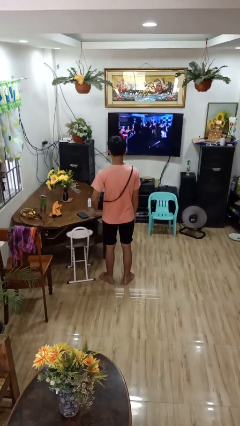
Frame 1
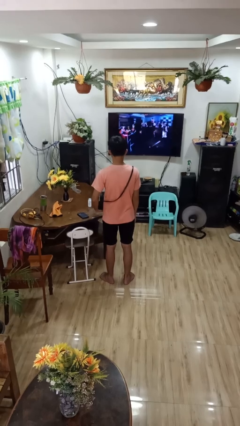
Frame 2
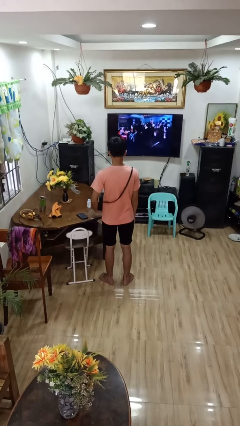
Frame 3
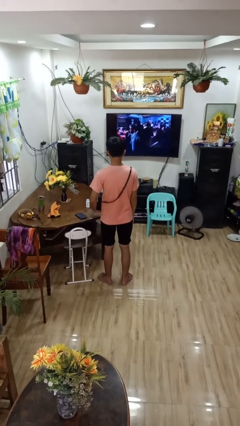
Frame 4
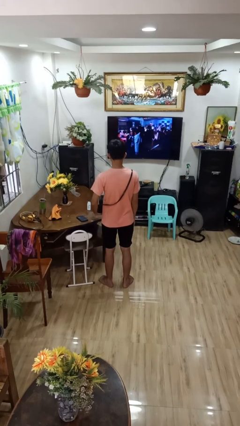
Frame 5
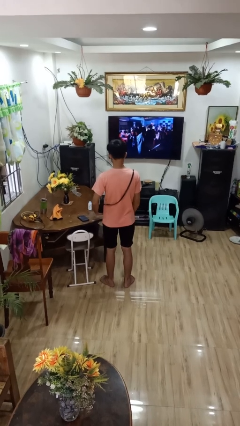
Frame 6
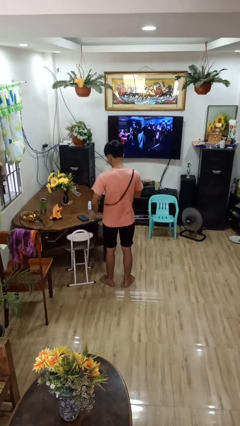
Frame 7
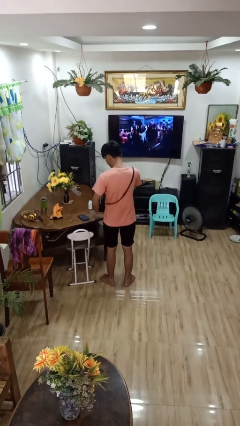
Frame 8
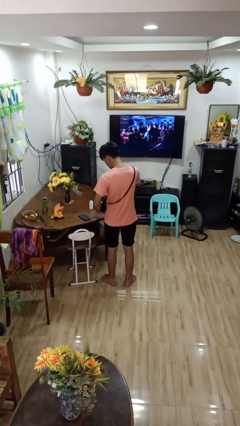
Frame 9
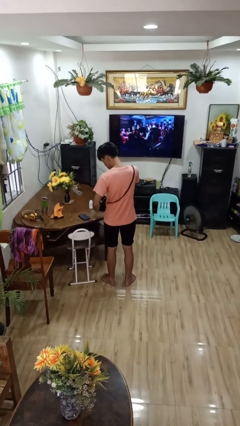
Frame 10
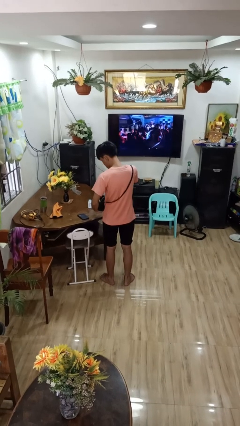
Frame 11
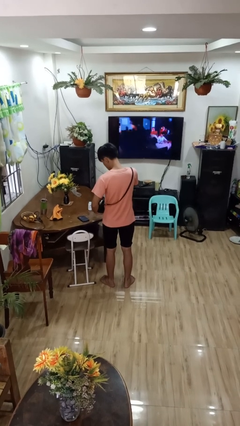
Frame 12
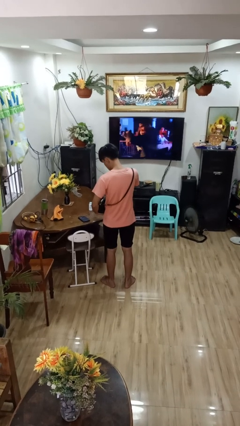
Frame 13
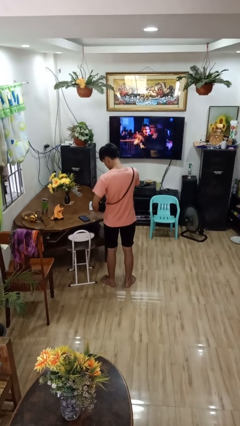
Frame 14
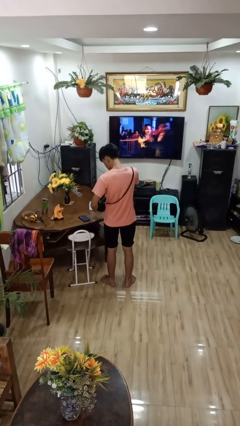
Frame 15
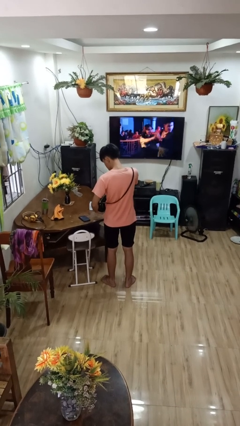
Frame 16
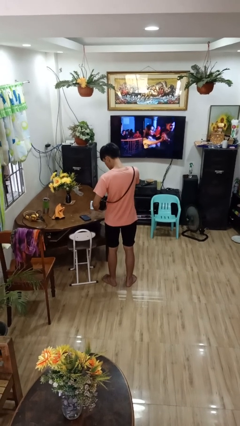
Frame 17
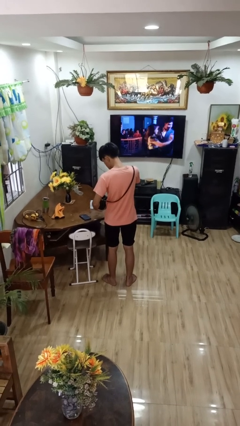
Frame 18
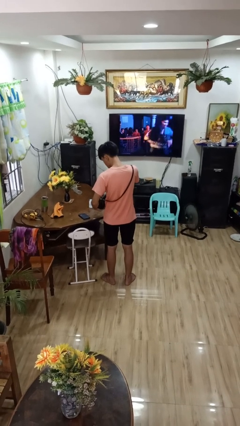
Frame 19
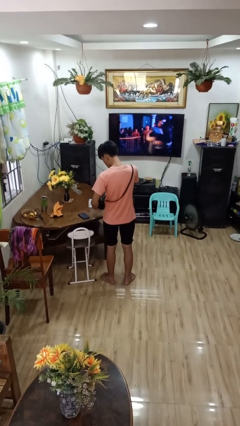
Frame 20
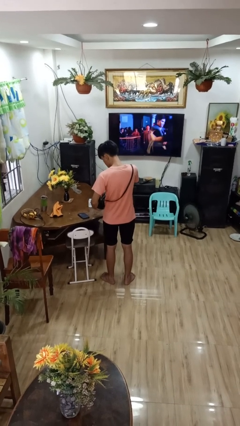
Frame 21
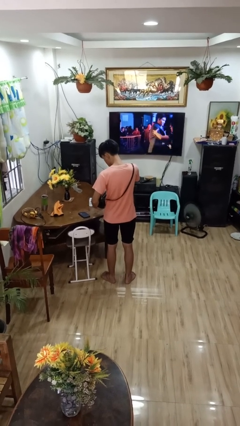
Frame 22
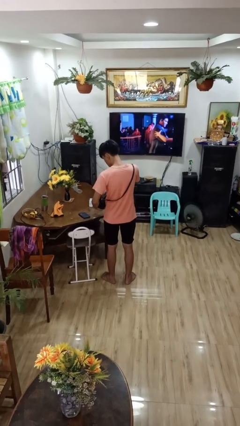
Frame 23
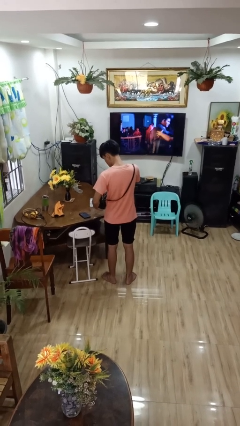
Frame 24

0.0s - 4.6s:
person searches in purse

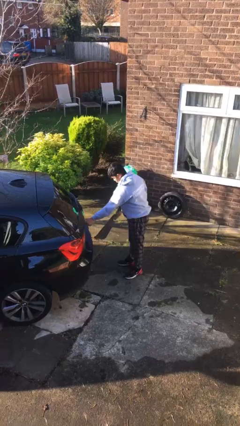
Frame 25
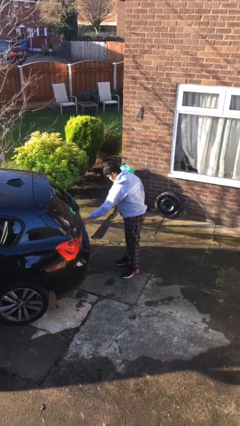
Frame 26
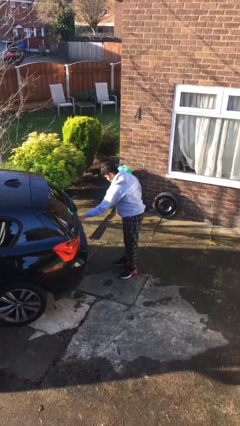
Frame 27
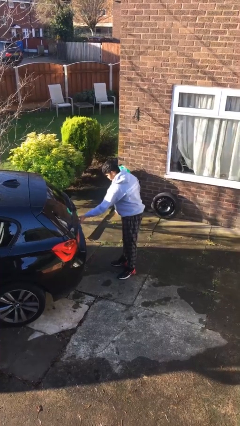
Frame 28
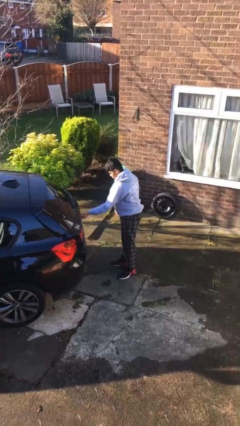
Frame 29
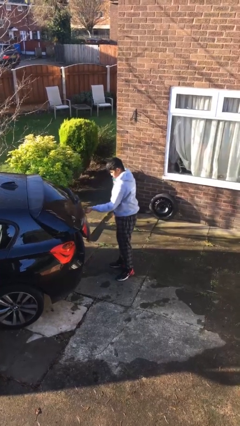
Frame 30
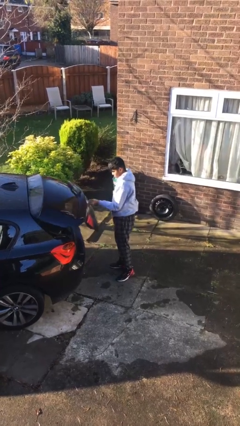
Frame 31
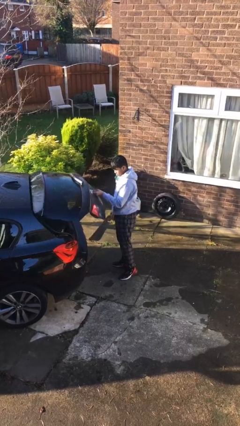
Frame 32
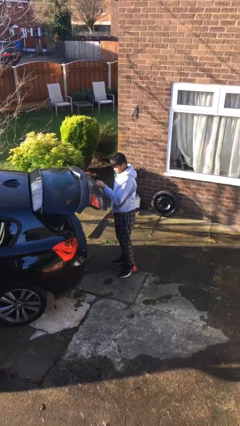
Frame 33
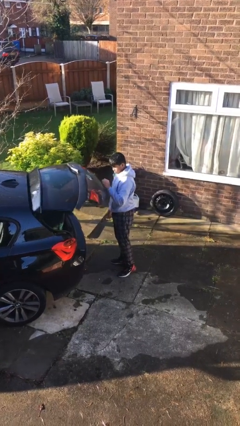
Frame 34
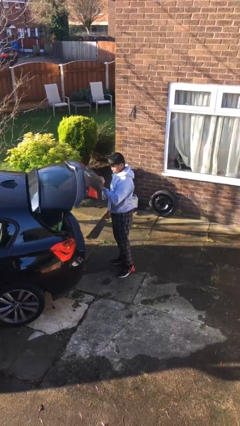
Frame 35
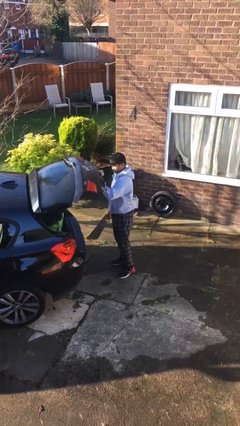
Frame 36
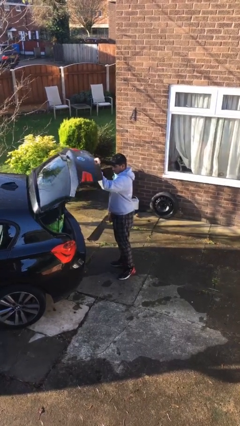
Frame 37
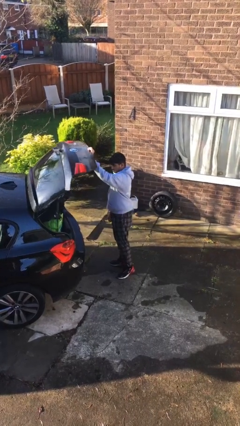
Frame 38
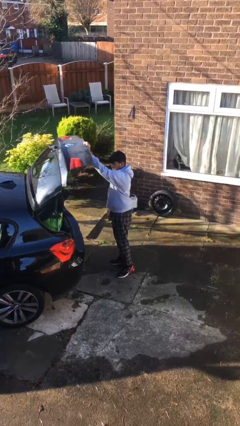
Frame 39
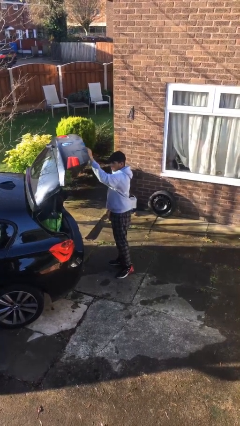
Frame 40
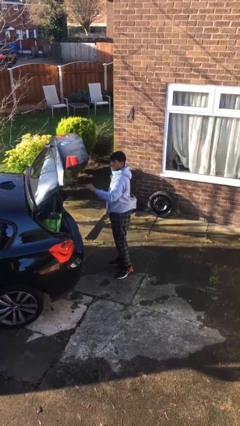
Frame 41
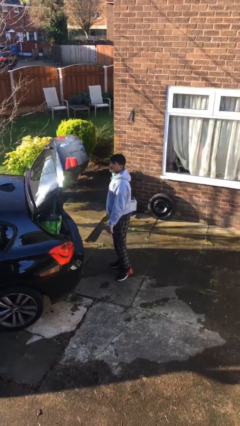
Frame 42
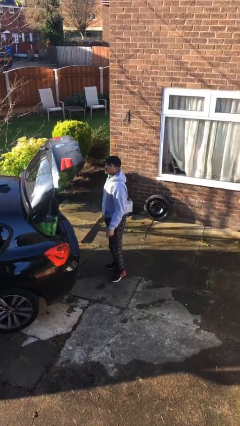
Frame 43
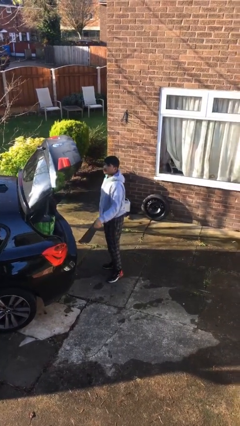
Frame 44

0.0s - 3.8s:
person opens car trunk

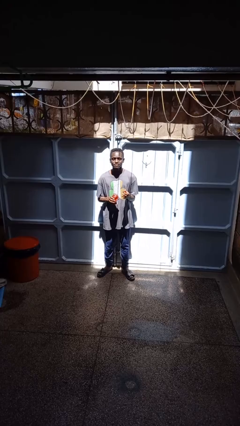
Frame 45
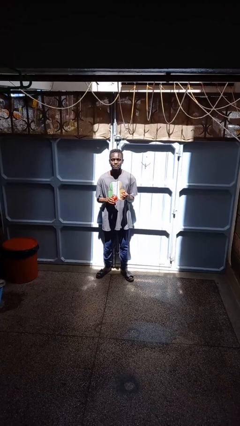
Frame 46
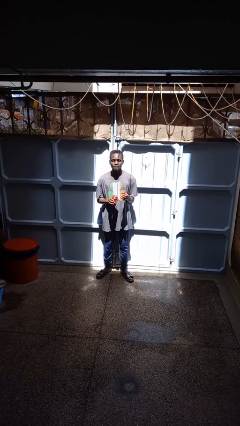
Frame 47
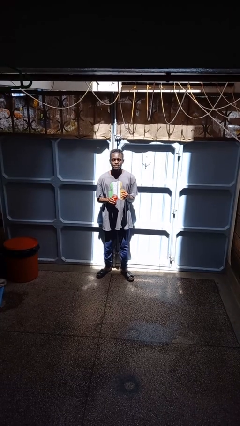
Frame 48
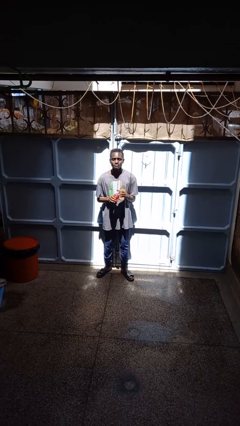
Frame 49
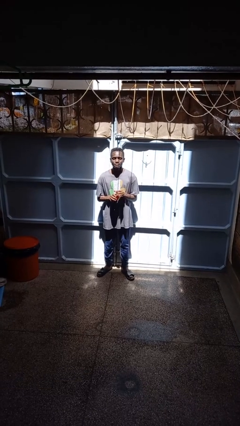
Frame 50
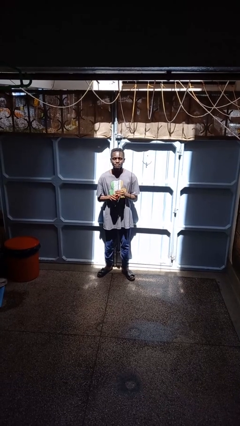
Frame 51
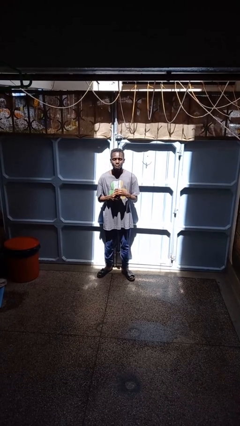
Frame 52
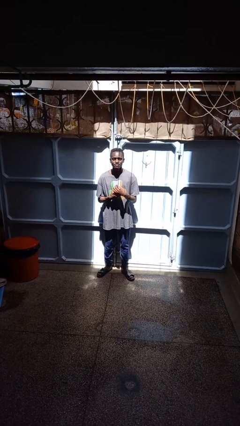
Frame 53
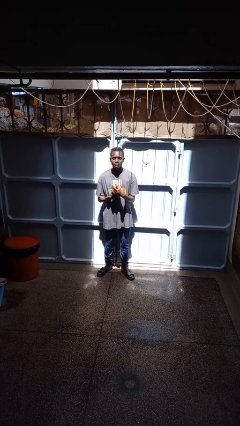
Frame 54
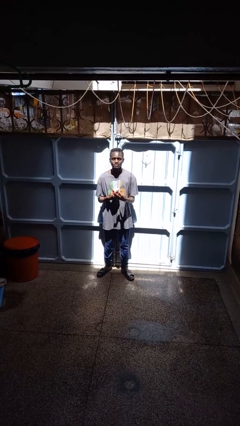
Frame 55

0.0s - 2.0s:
person closes jar

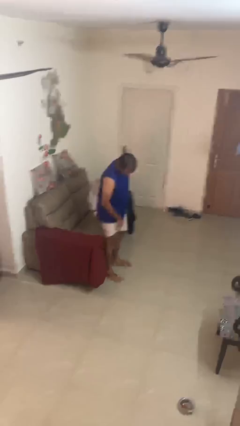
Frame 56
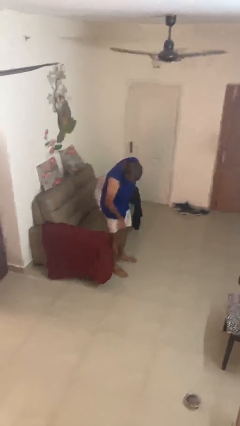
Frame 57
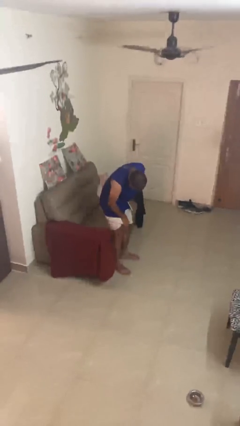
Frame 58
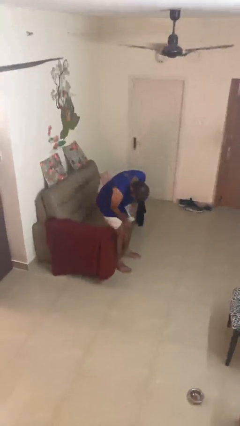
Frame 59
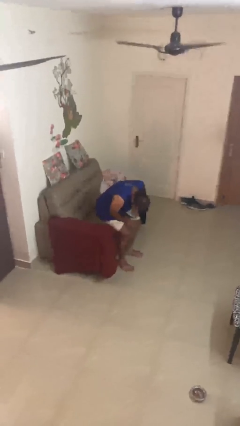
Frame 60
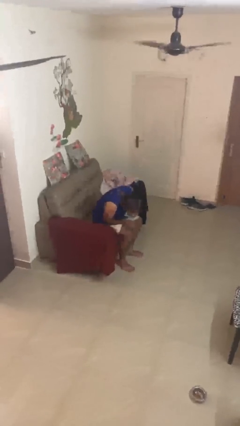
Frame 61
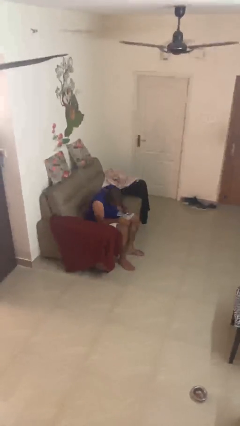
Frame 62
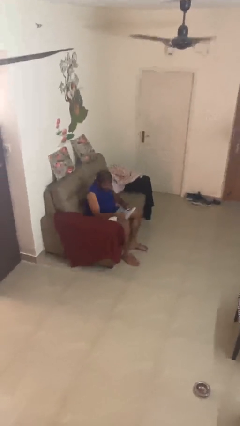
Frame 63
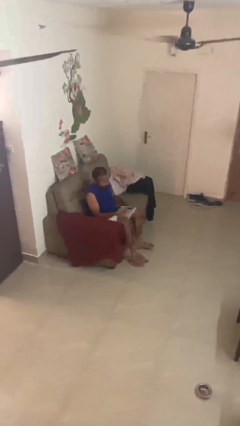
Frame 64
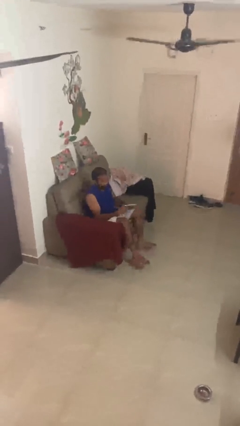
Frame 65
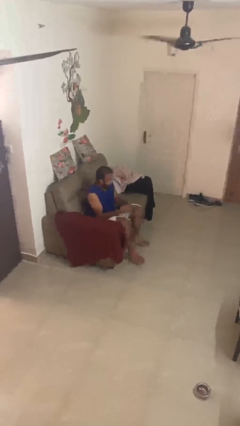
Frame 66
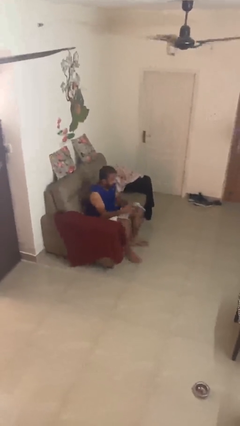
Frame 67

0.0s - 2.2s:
person sits down

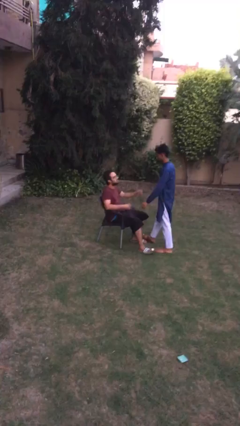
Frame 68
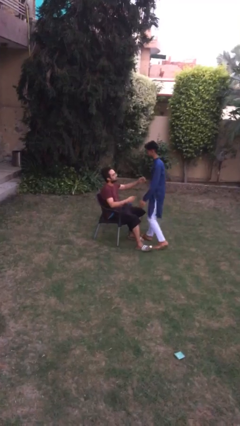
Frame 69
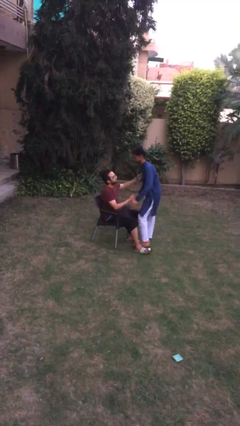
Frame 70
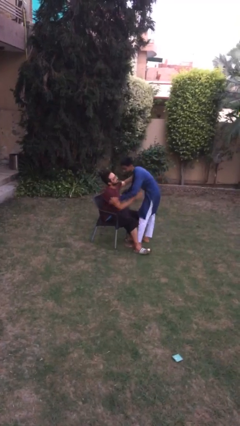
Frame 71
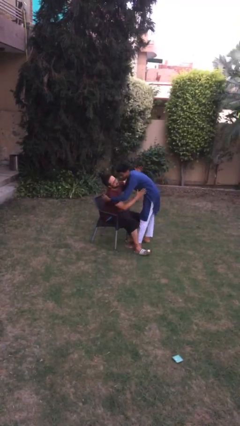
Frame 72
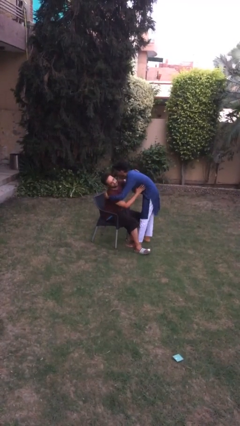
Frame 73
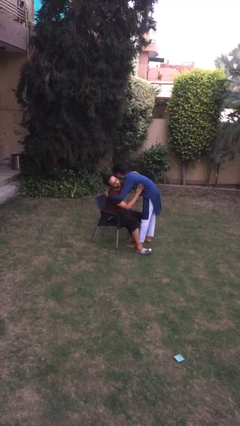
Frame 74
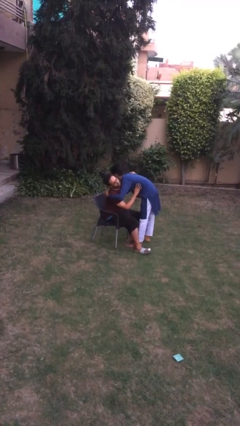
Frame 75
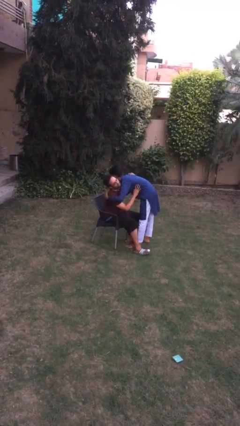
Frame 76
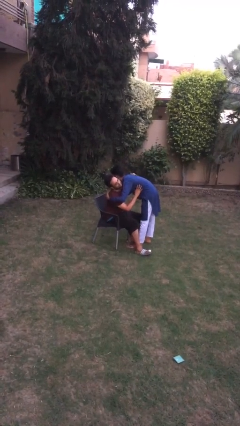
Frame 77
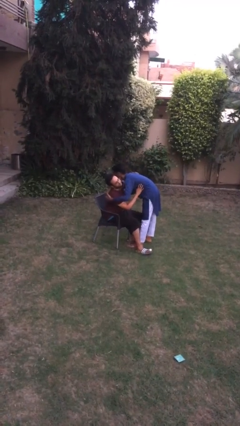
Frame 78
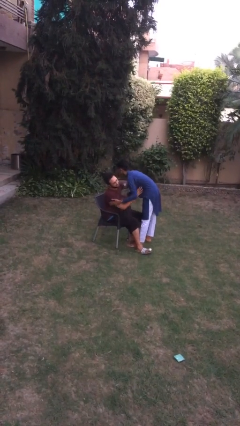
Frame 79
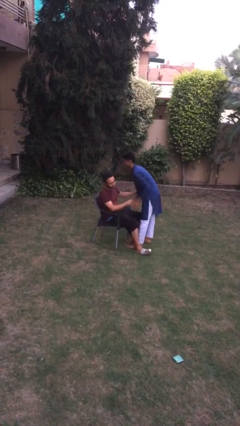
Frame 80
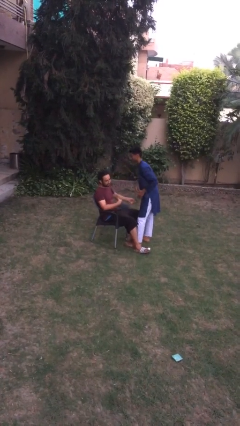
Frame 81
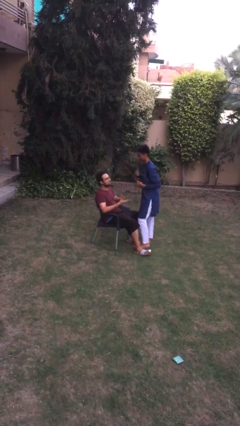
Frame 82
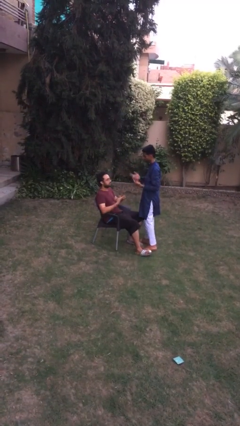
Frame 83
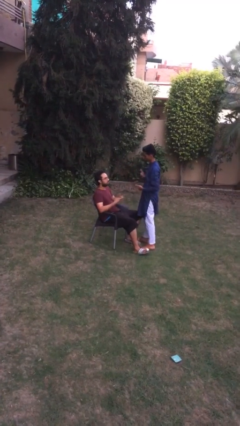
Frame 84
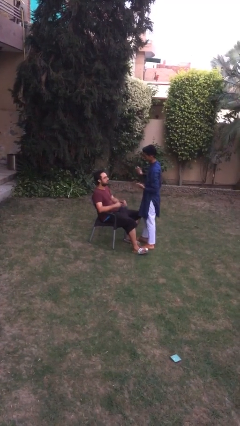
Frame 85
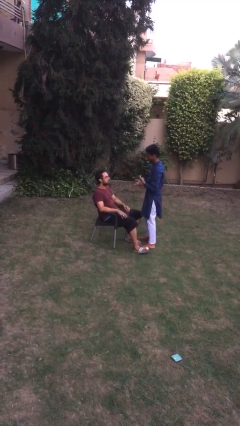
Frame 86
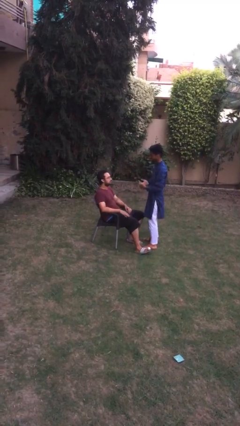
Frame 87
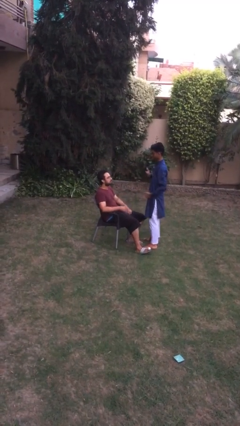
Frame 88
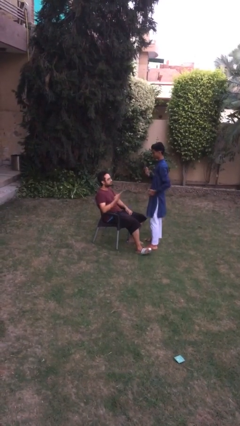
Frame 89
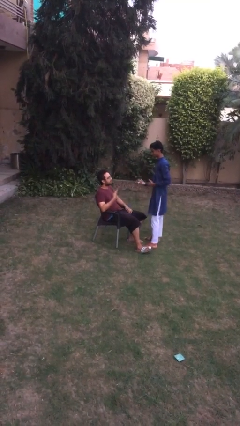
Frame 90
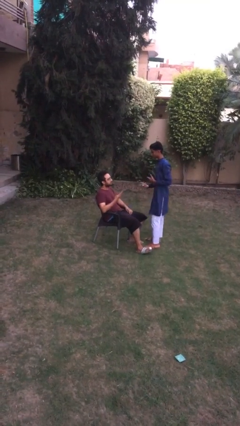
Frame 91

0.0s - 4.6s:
person embraces person
